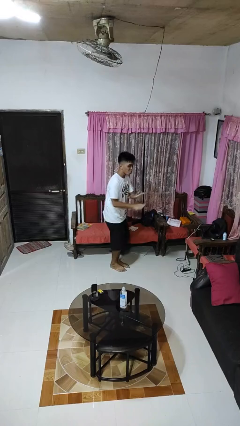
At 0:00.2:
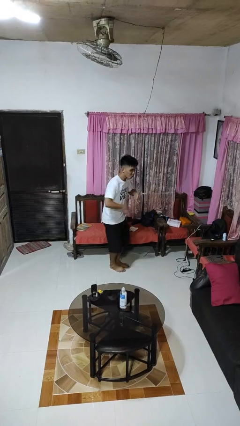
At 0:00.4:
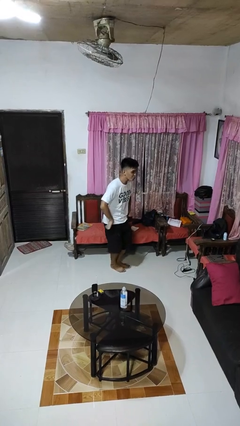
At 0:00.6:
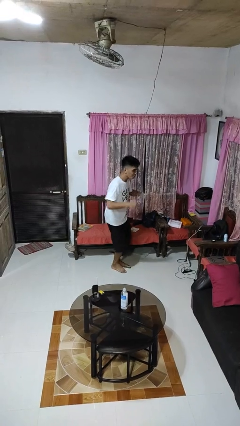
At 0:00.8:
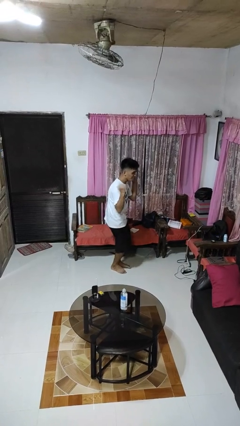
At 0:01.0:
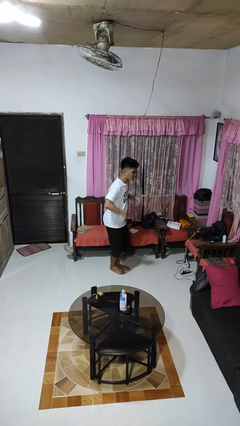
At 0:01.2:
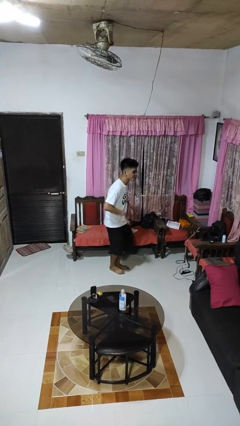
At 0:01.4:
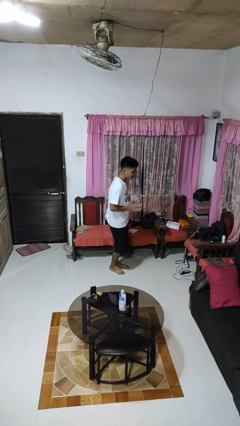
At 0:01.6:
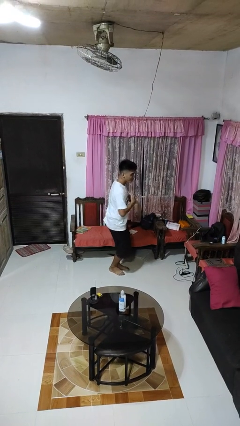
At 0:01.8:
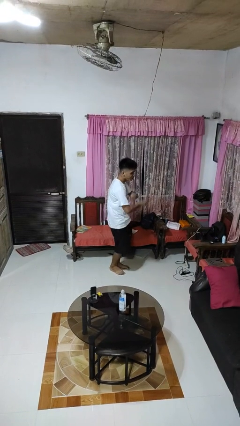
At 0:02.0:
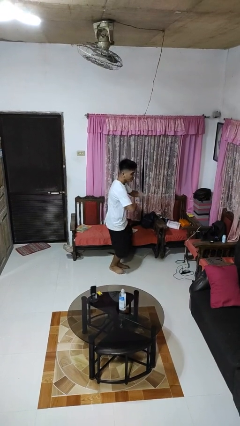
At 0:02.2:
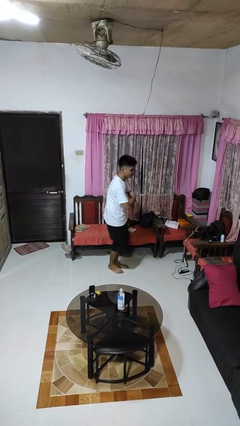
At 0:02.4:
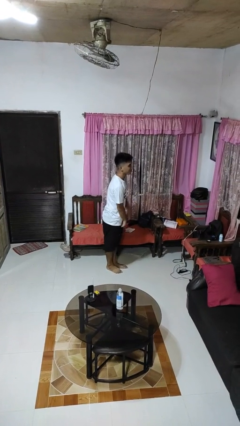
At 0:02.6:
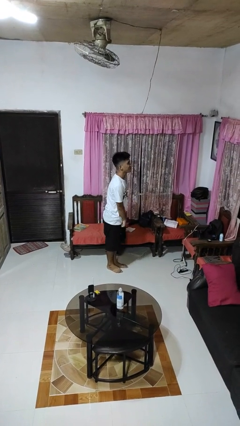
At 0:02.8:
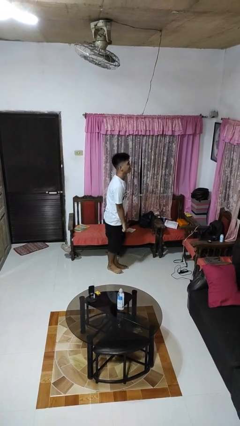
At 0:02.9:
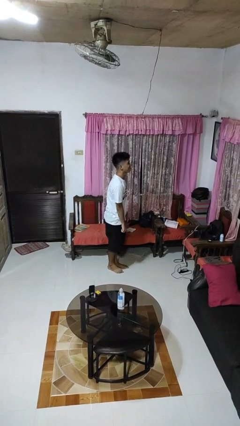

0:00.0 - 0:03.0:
person dances in place

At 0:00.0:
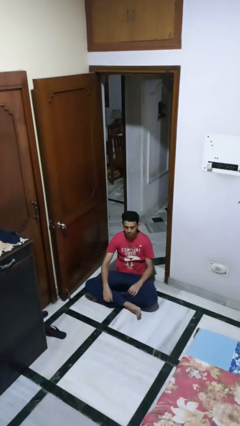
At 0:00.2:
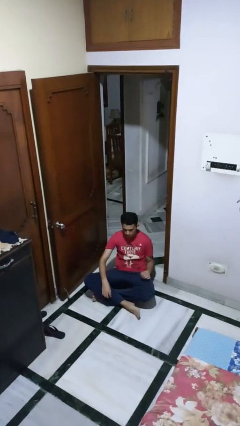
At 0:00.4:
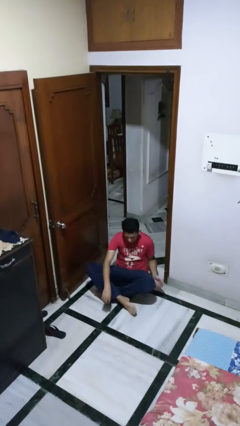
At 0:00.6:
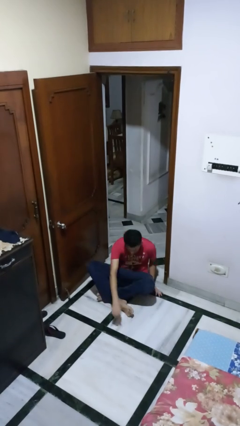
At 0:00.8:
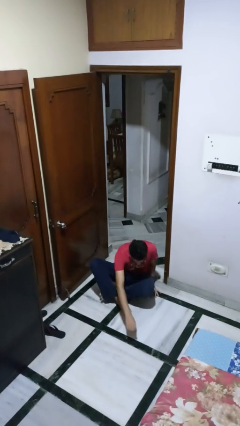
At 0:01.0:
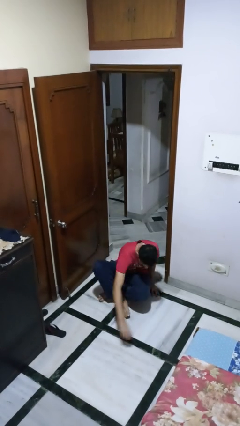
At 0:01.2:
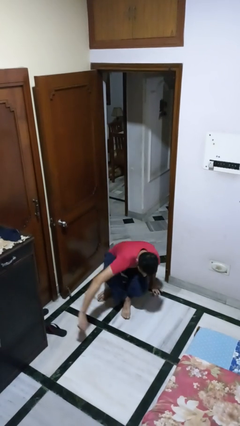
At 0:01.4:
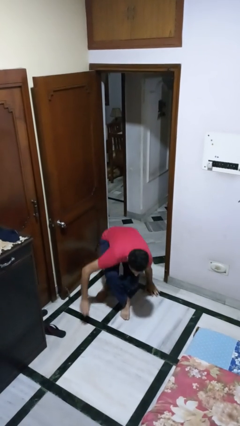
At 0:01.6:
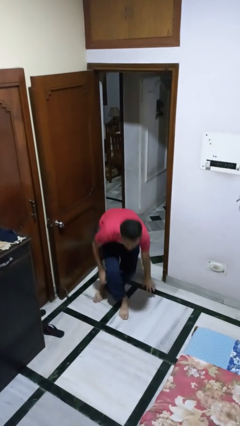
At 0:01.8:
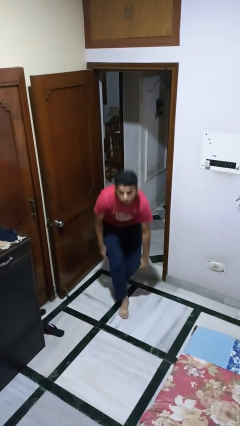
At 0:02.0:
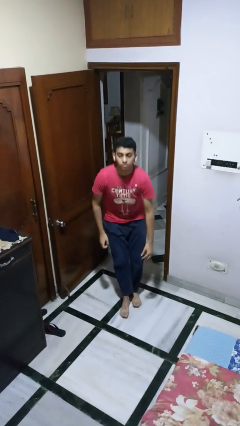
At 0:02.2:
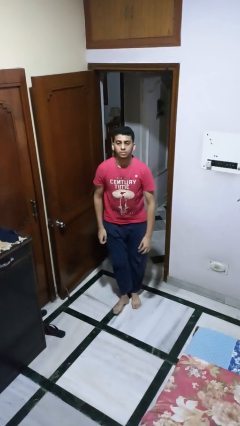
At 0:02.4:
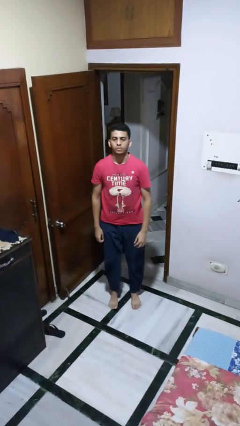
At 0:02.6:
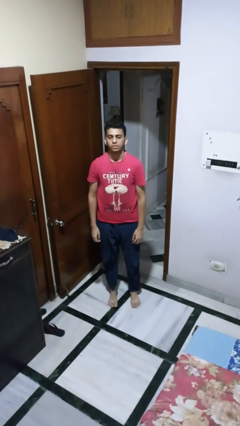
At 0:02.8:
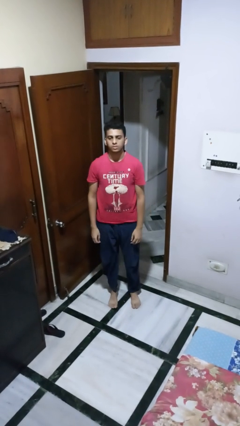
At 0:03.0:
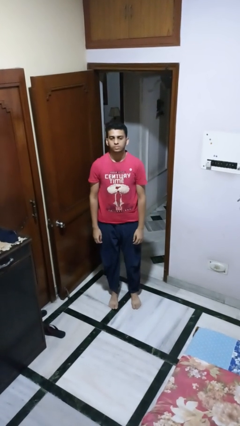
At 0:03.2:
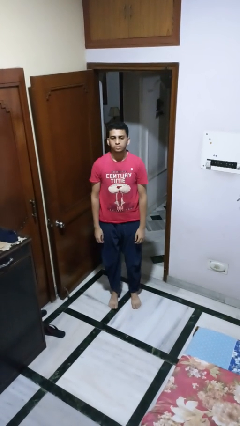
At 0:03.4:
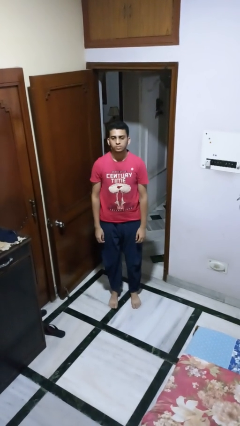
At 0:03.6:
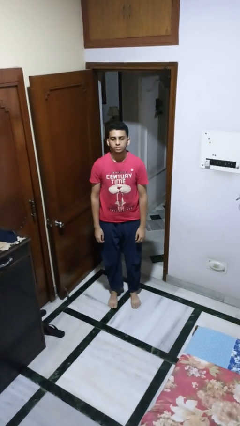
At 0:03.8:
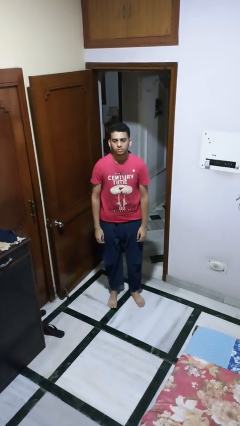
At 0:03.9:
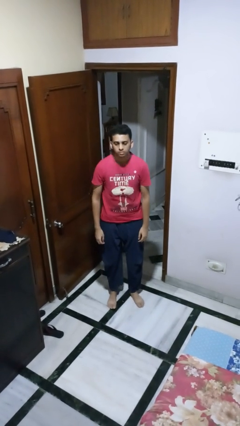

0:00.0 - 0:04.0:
person stands up from floor

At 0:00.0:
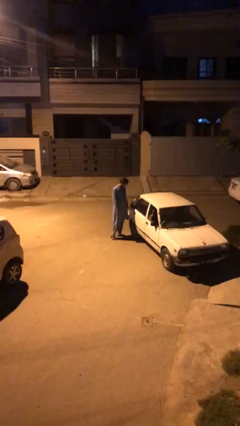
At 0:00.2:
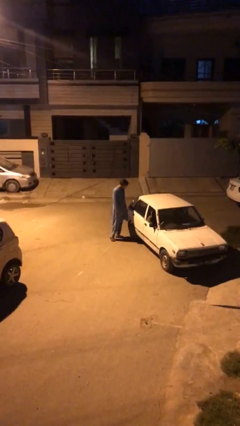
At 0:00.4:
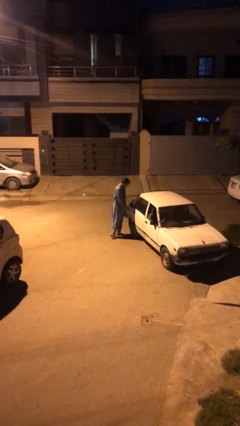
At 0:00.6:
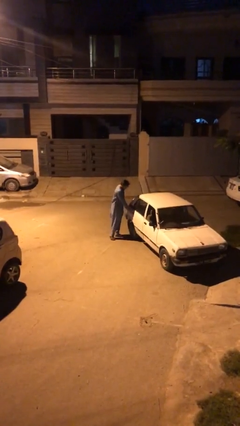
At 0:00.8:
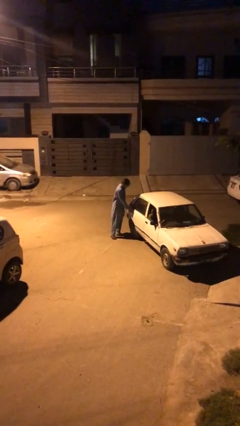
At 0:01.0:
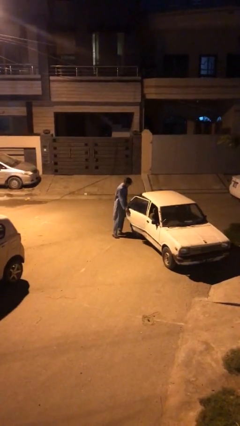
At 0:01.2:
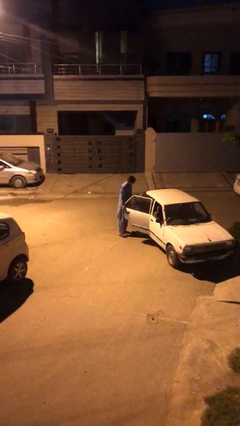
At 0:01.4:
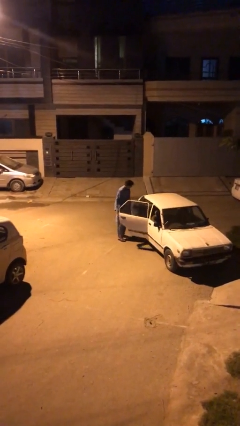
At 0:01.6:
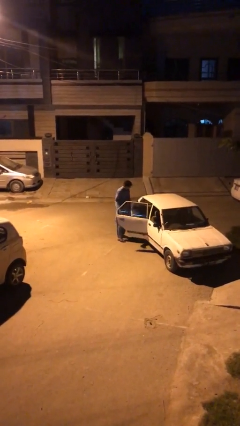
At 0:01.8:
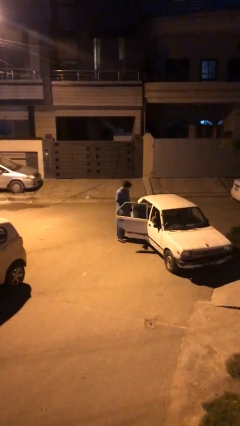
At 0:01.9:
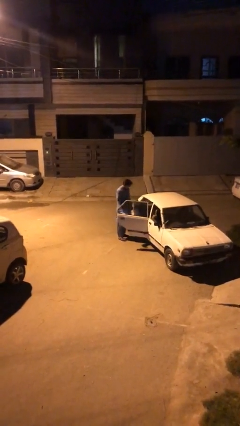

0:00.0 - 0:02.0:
person opens car door

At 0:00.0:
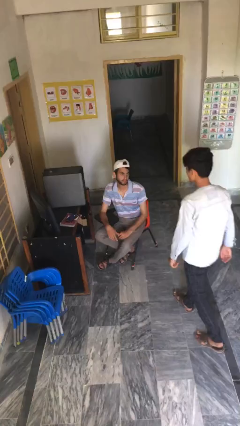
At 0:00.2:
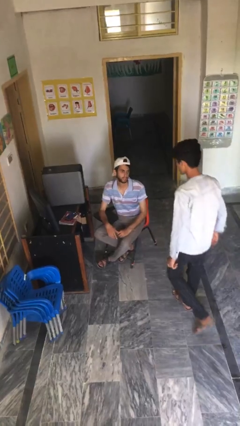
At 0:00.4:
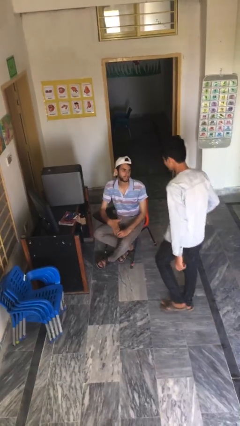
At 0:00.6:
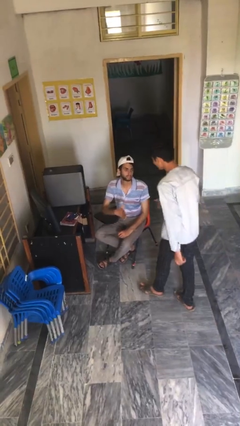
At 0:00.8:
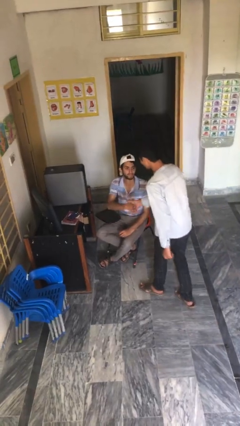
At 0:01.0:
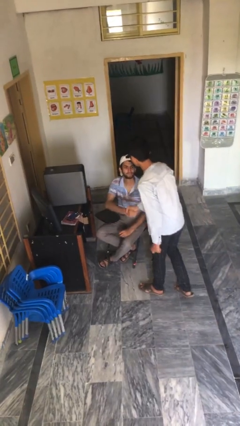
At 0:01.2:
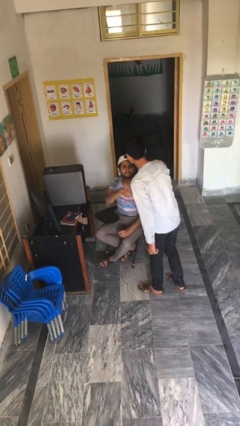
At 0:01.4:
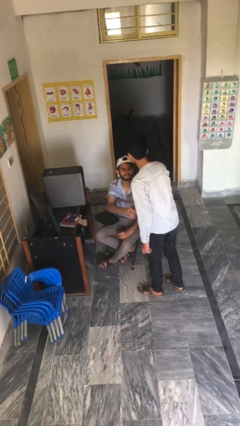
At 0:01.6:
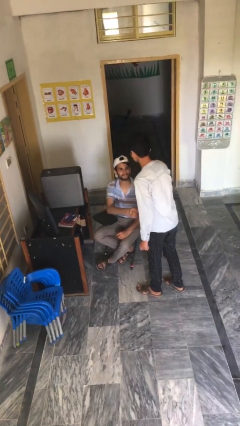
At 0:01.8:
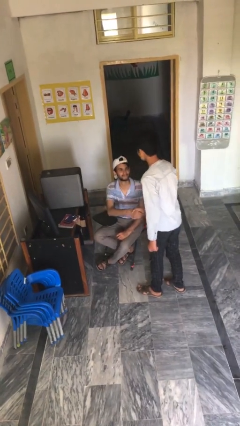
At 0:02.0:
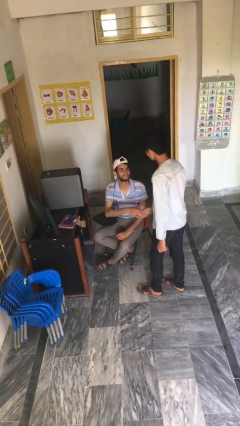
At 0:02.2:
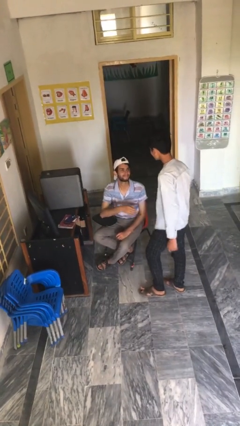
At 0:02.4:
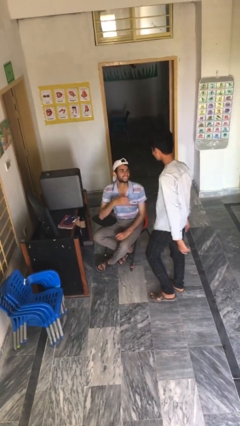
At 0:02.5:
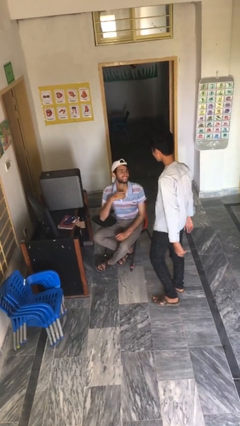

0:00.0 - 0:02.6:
person shakes hand

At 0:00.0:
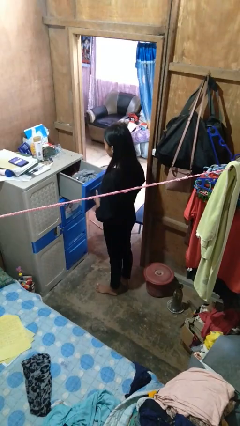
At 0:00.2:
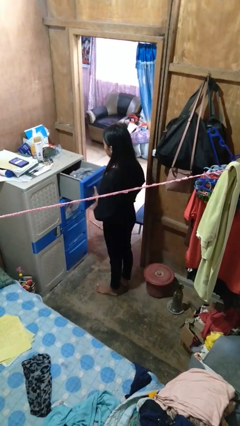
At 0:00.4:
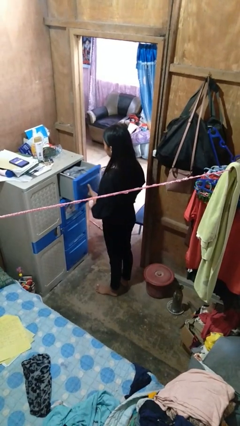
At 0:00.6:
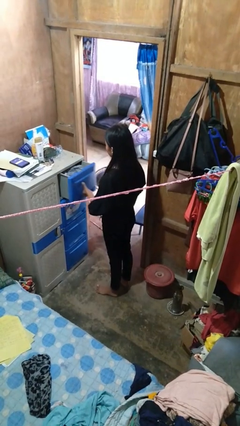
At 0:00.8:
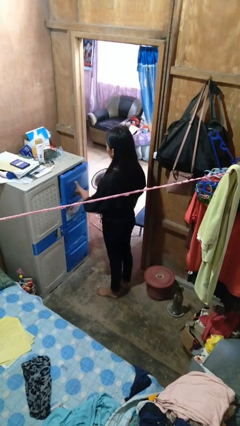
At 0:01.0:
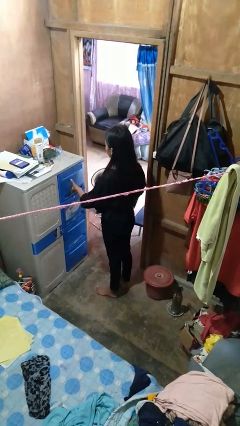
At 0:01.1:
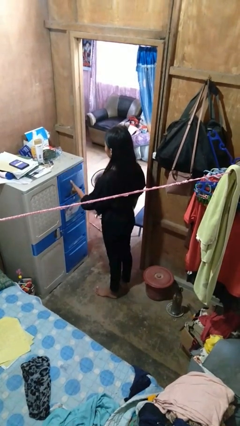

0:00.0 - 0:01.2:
person closes dresser drawer

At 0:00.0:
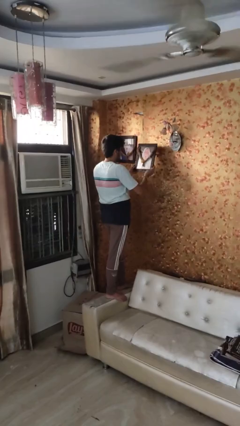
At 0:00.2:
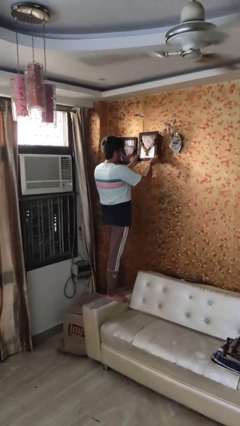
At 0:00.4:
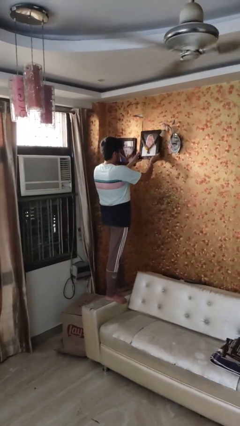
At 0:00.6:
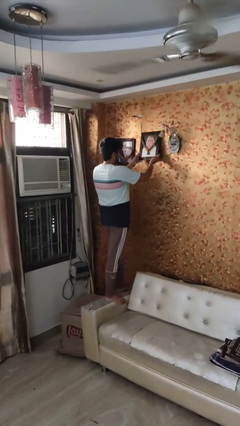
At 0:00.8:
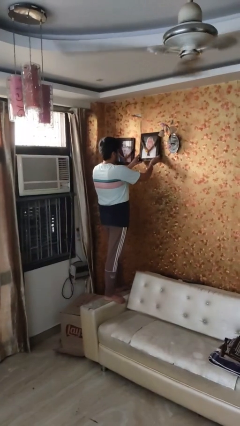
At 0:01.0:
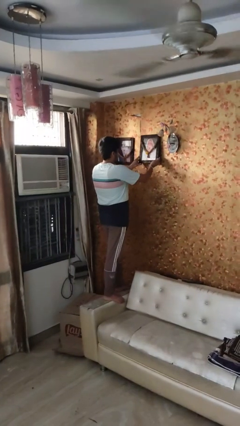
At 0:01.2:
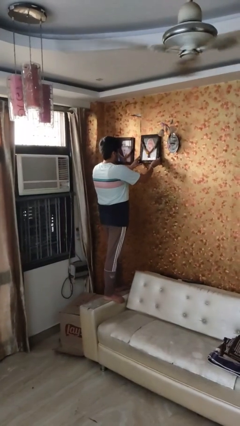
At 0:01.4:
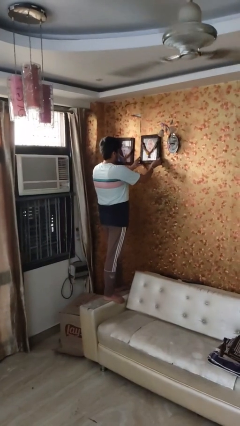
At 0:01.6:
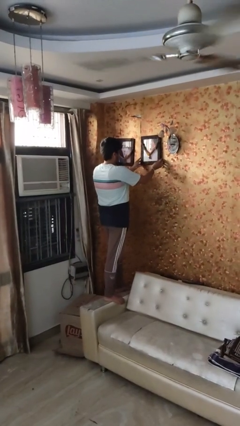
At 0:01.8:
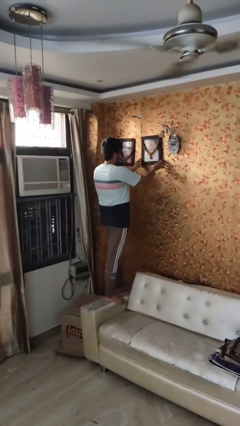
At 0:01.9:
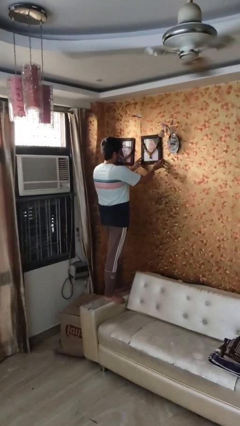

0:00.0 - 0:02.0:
person puts up picture frame

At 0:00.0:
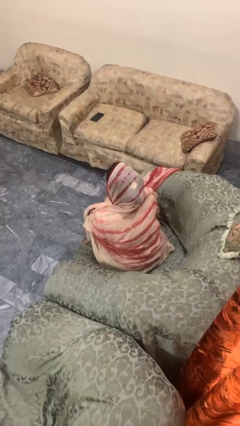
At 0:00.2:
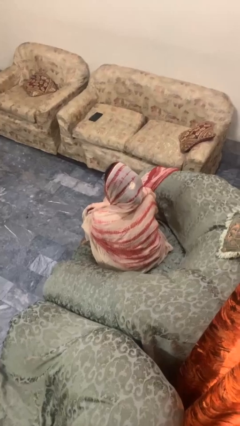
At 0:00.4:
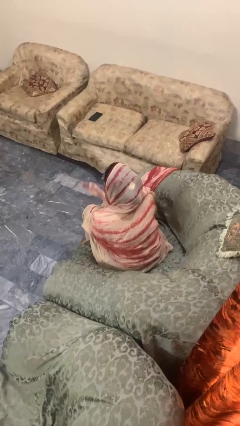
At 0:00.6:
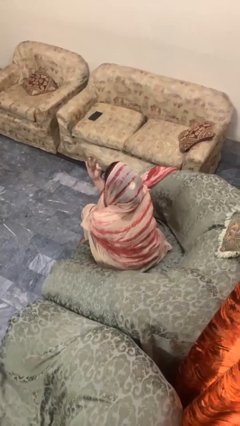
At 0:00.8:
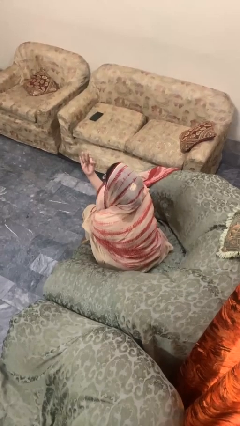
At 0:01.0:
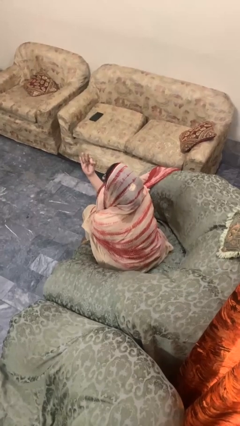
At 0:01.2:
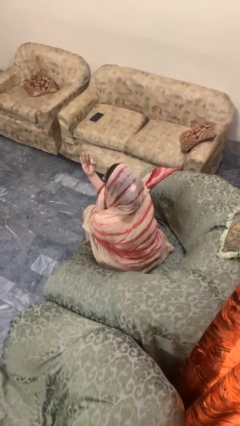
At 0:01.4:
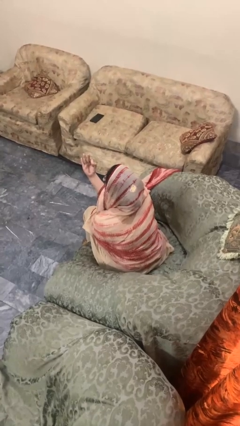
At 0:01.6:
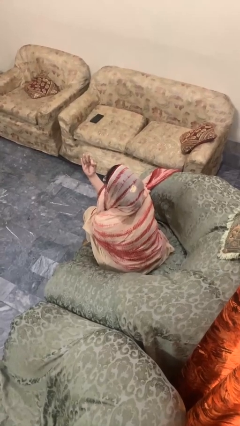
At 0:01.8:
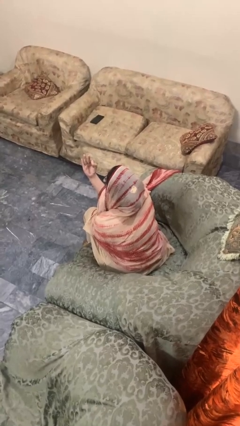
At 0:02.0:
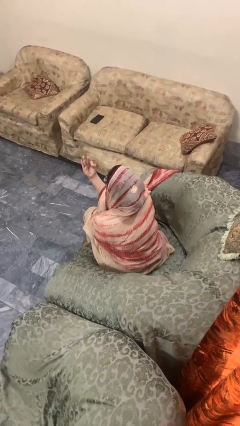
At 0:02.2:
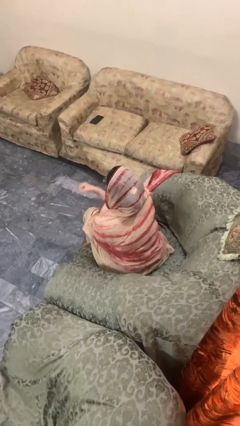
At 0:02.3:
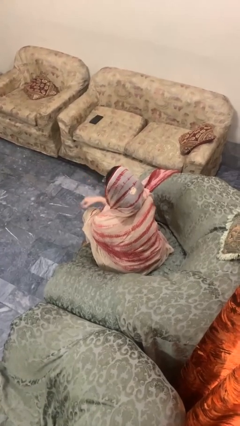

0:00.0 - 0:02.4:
person gestures number three
